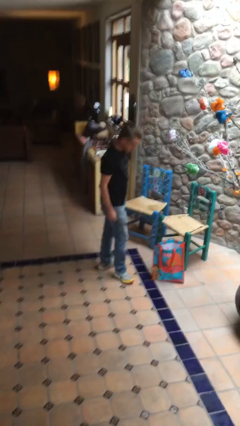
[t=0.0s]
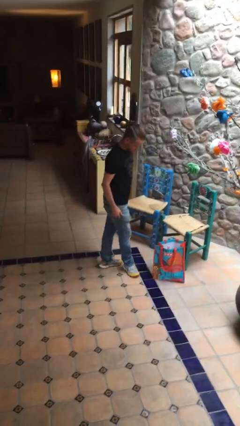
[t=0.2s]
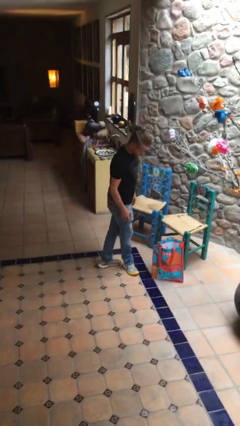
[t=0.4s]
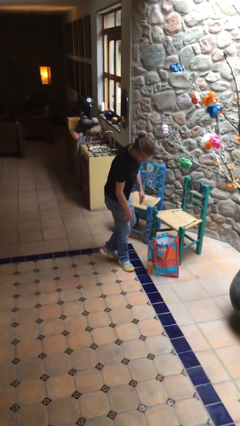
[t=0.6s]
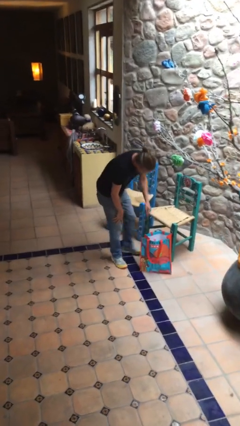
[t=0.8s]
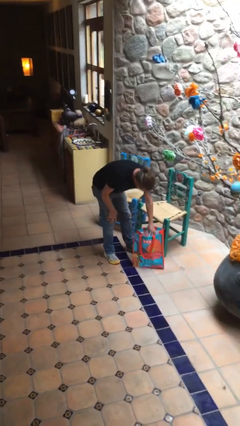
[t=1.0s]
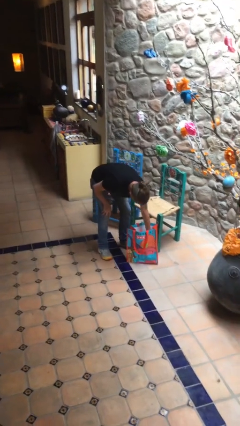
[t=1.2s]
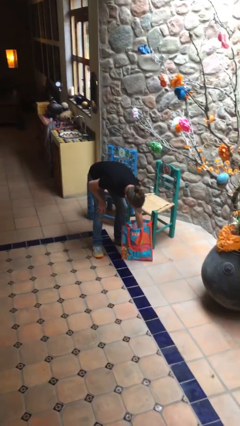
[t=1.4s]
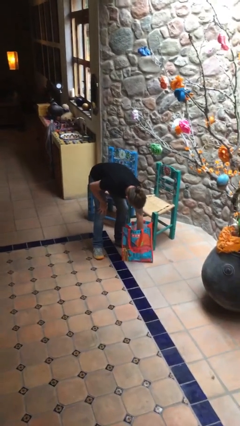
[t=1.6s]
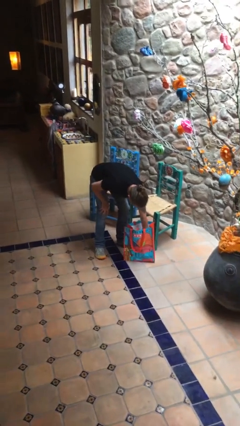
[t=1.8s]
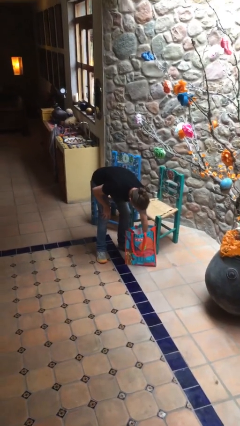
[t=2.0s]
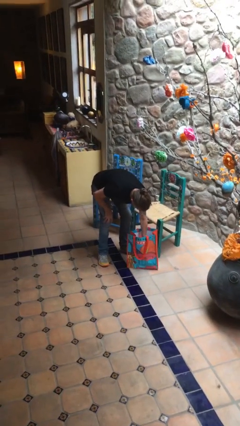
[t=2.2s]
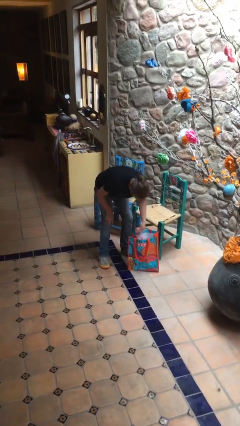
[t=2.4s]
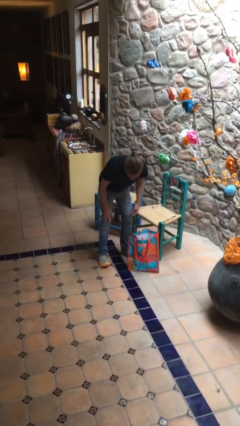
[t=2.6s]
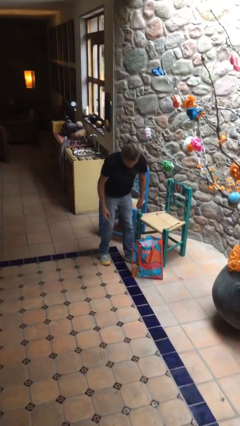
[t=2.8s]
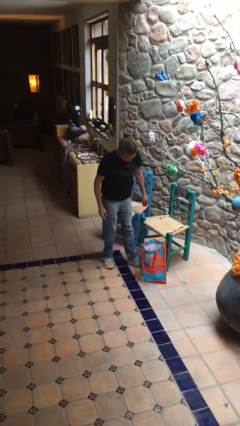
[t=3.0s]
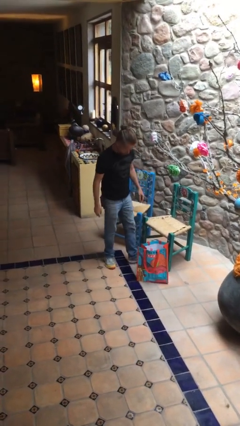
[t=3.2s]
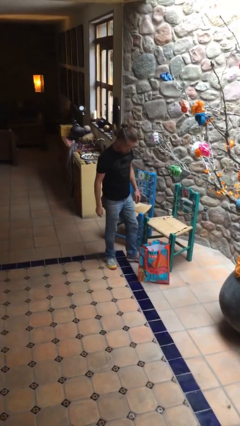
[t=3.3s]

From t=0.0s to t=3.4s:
person searches in bag

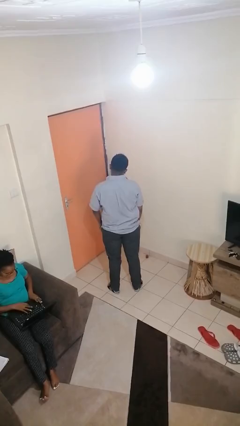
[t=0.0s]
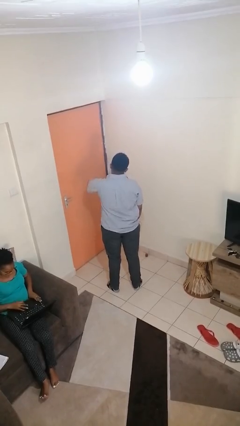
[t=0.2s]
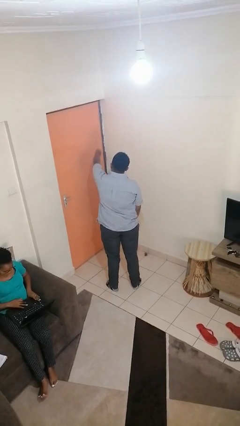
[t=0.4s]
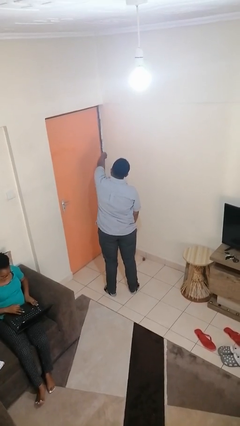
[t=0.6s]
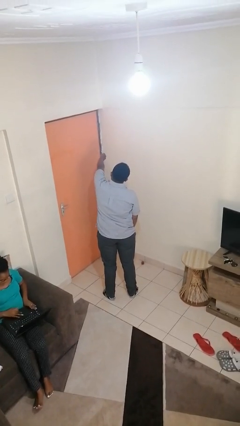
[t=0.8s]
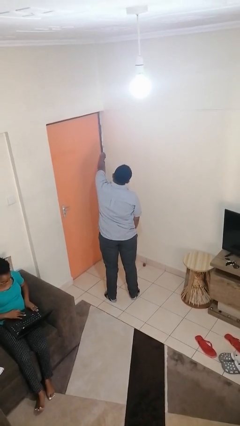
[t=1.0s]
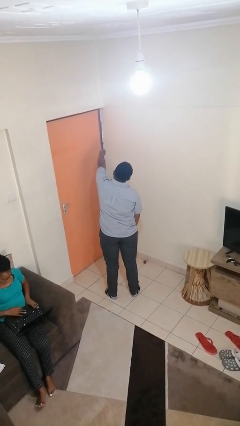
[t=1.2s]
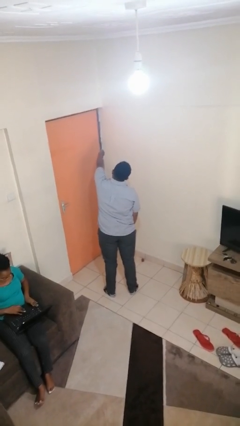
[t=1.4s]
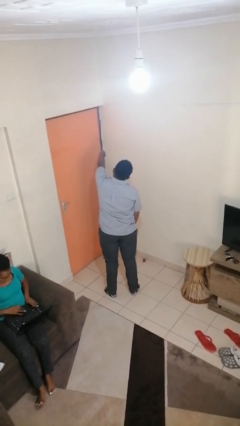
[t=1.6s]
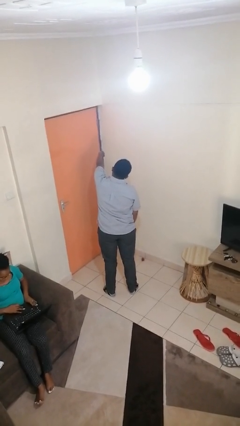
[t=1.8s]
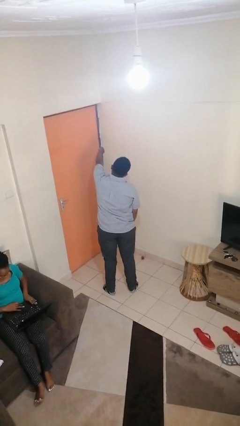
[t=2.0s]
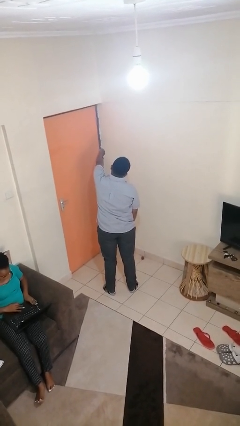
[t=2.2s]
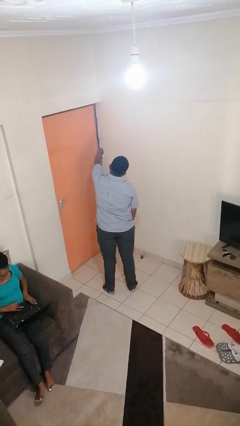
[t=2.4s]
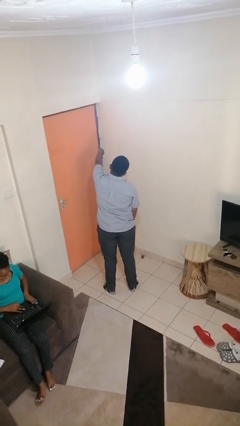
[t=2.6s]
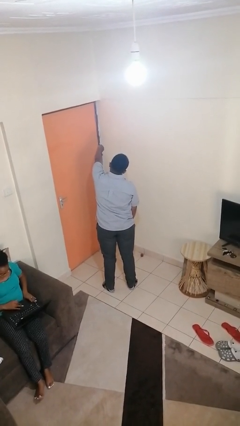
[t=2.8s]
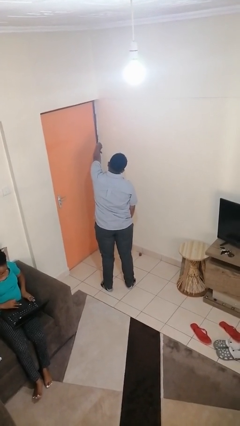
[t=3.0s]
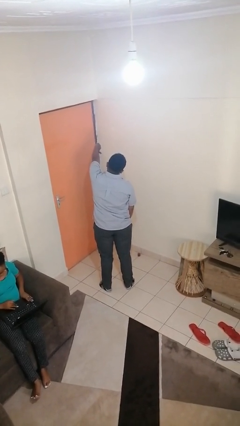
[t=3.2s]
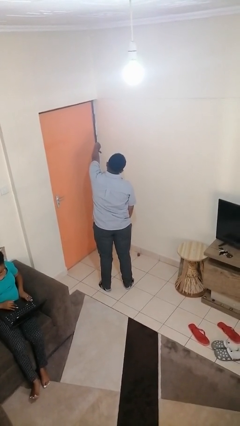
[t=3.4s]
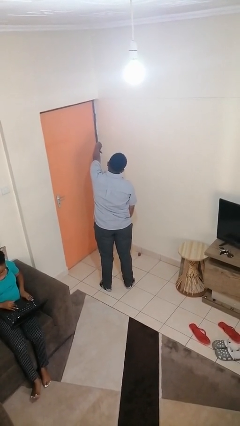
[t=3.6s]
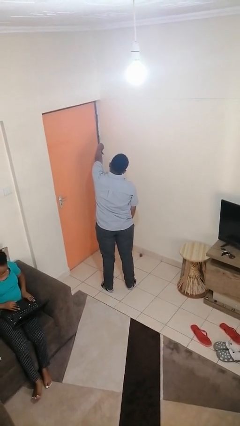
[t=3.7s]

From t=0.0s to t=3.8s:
person gestures thumbs down

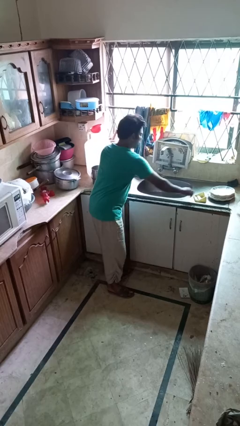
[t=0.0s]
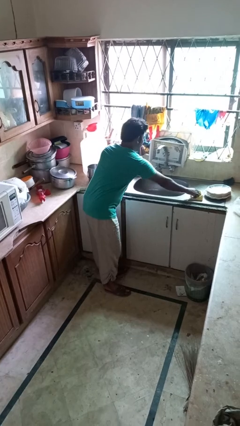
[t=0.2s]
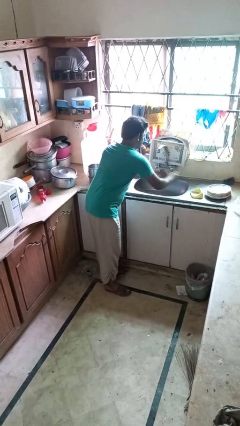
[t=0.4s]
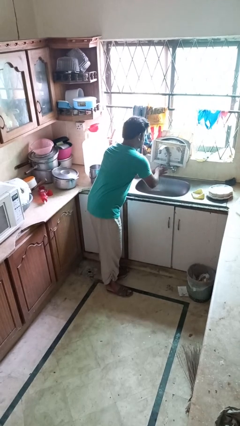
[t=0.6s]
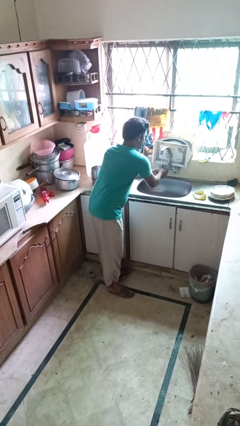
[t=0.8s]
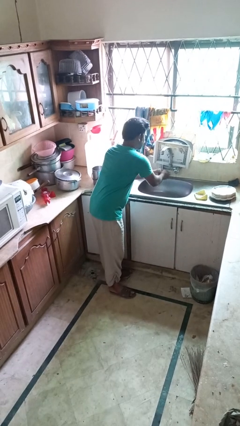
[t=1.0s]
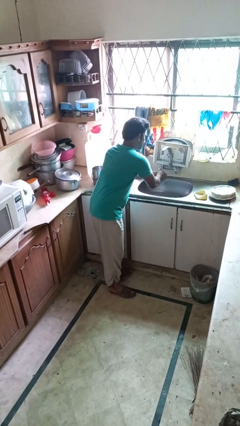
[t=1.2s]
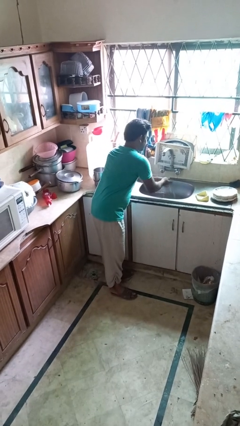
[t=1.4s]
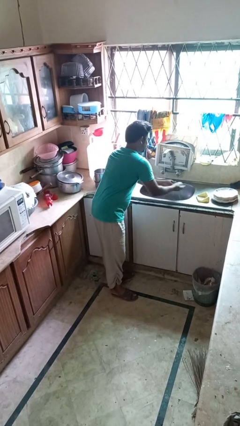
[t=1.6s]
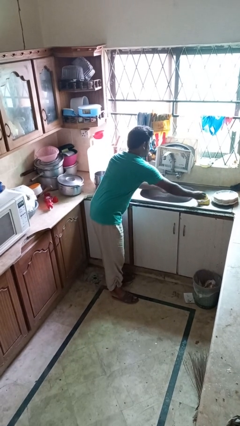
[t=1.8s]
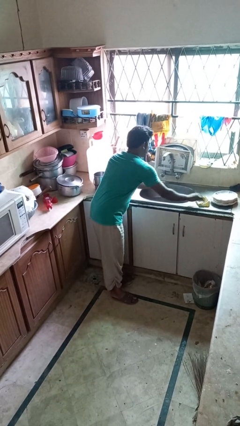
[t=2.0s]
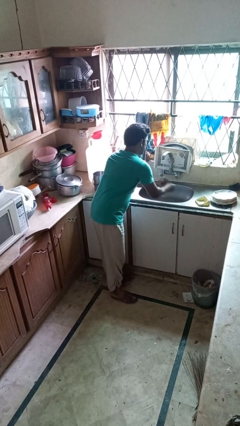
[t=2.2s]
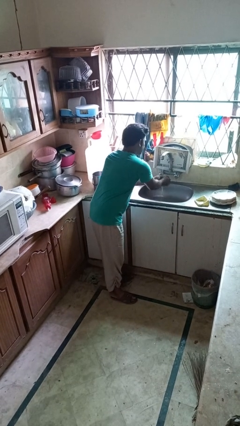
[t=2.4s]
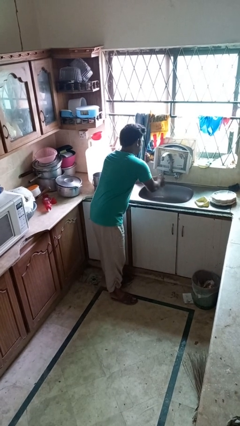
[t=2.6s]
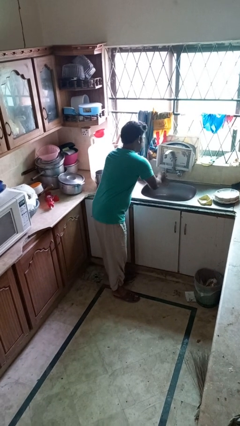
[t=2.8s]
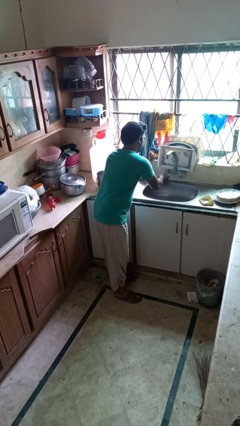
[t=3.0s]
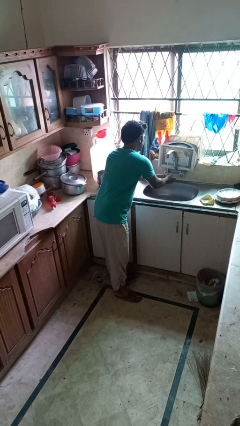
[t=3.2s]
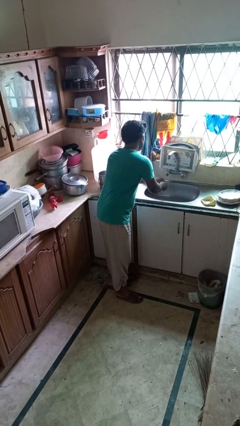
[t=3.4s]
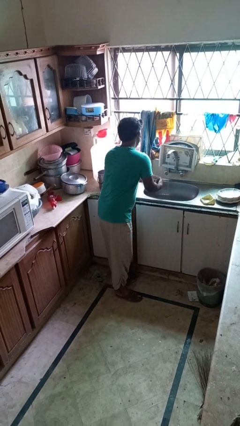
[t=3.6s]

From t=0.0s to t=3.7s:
person washes hands

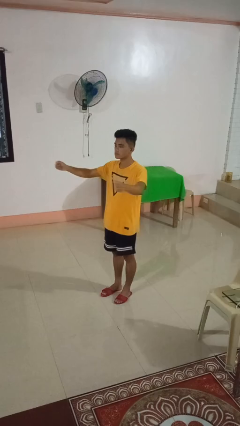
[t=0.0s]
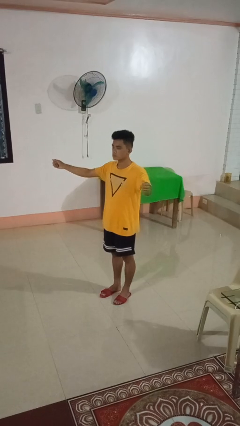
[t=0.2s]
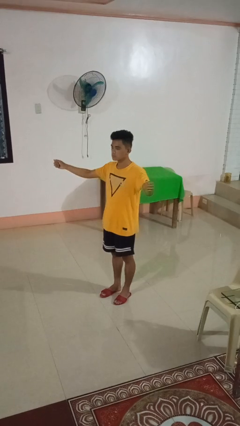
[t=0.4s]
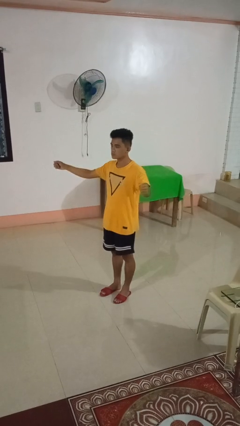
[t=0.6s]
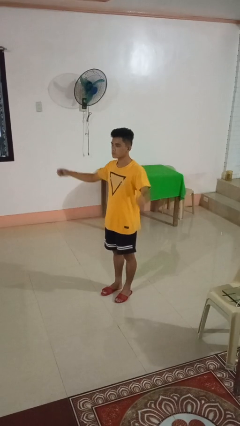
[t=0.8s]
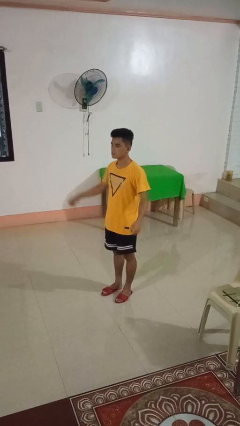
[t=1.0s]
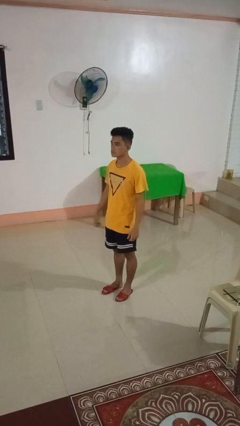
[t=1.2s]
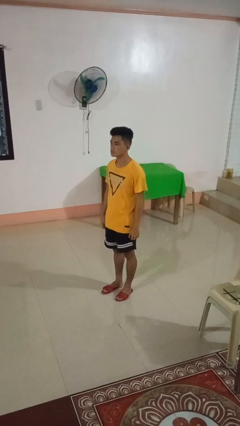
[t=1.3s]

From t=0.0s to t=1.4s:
person gestures zoom out

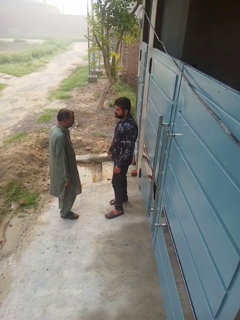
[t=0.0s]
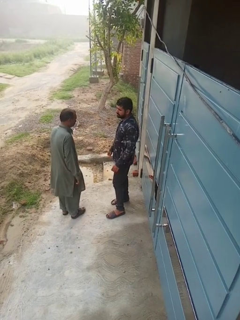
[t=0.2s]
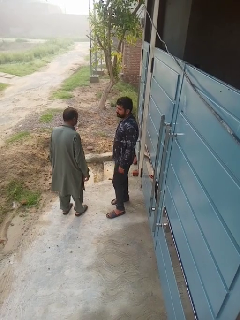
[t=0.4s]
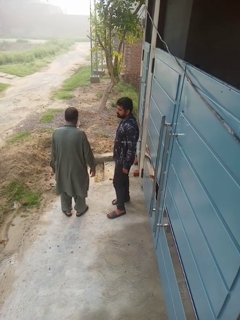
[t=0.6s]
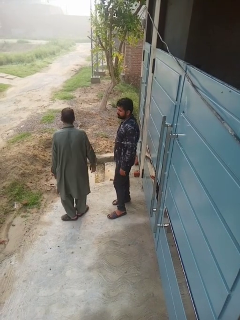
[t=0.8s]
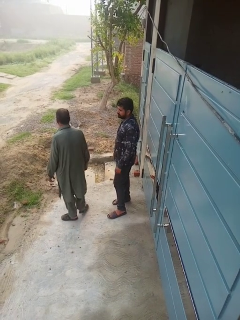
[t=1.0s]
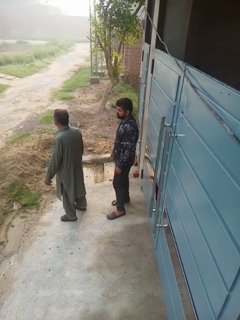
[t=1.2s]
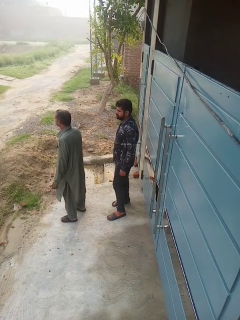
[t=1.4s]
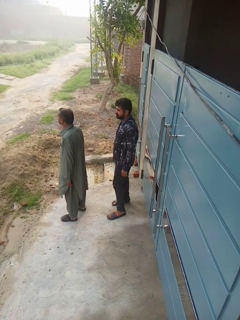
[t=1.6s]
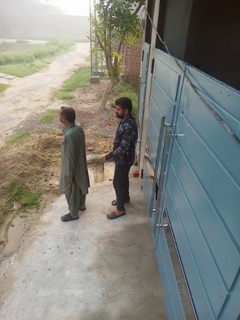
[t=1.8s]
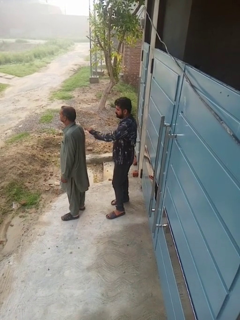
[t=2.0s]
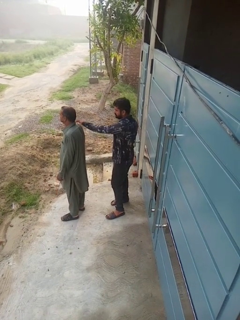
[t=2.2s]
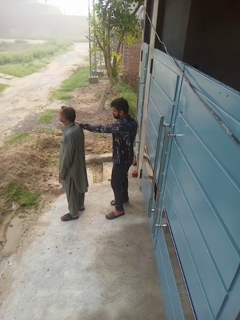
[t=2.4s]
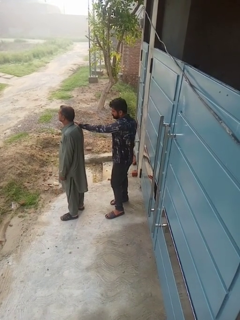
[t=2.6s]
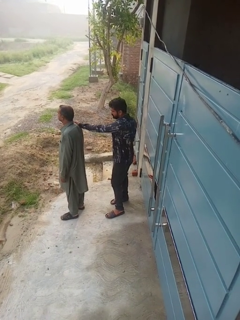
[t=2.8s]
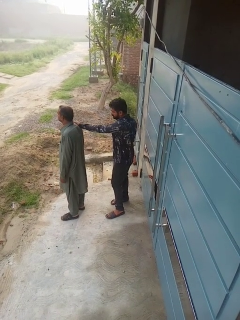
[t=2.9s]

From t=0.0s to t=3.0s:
person grabs person by shoulder

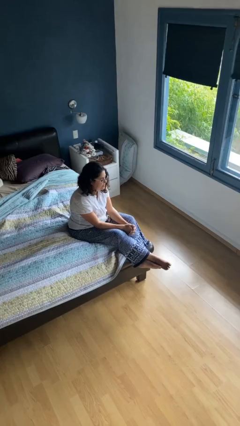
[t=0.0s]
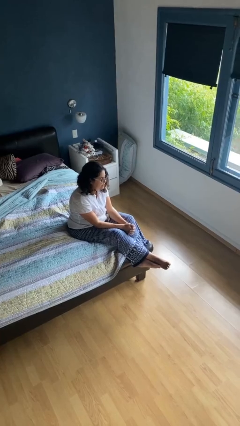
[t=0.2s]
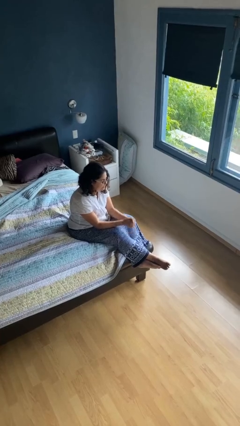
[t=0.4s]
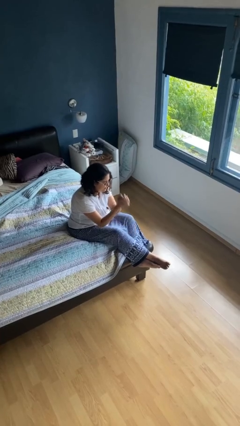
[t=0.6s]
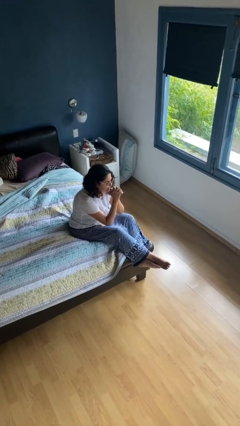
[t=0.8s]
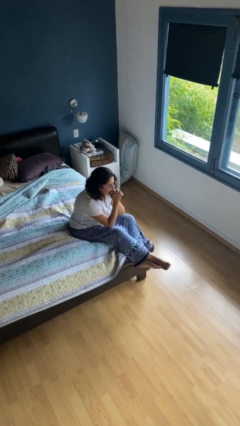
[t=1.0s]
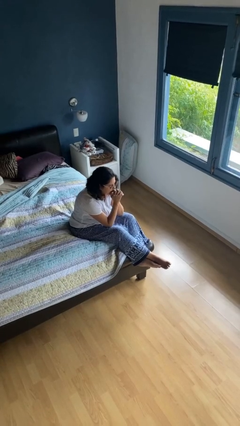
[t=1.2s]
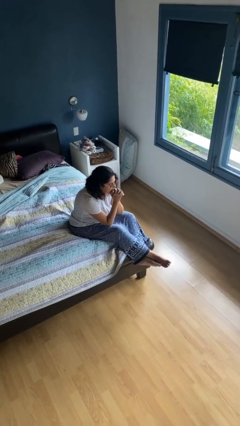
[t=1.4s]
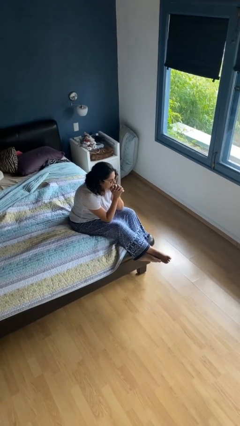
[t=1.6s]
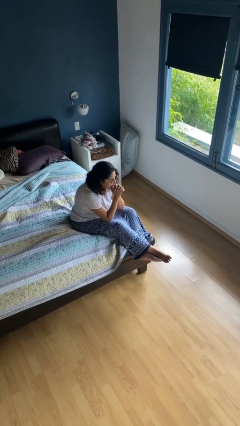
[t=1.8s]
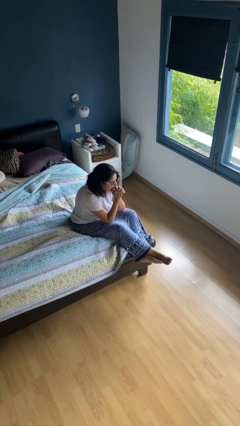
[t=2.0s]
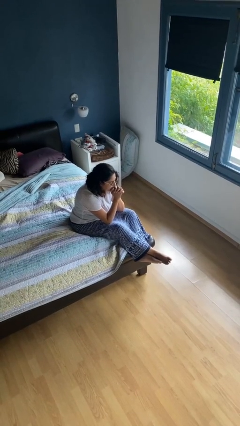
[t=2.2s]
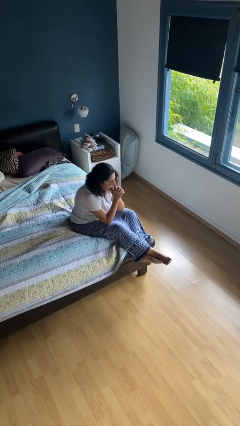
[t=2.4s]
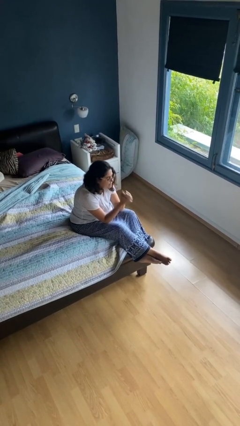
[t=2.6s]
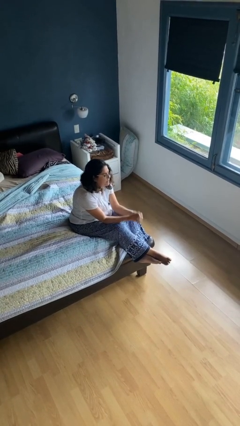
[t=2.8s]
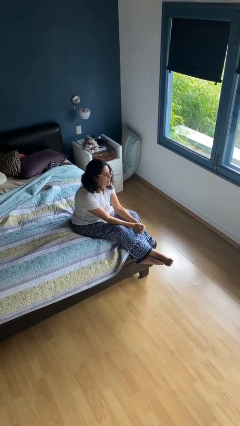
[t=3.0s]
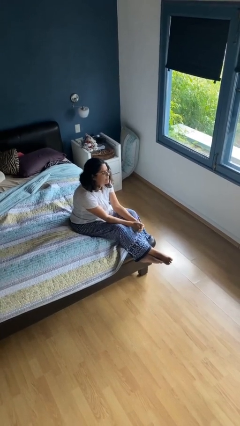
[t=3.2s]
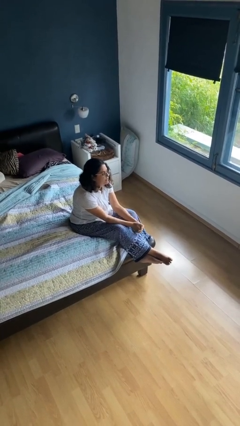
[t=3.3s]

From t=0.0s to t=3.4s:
person prays
